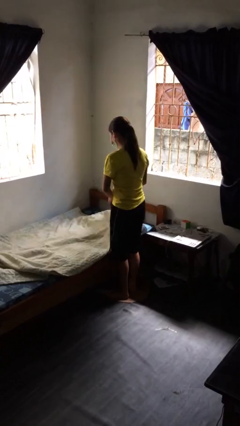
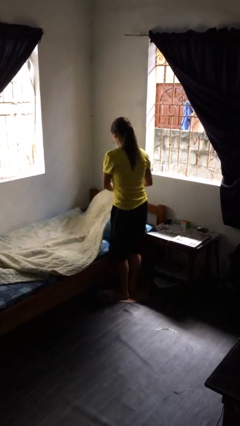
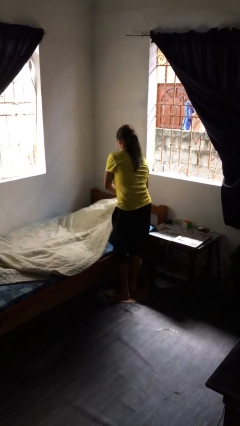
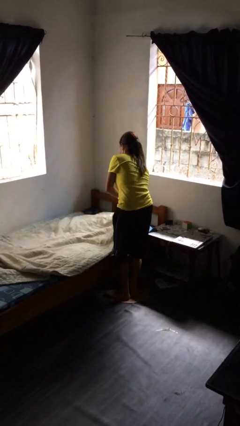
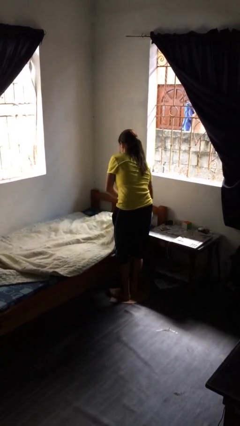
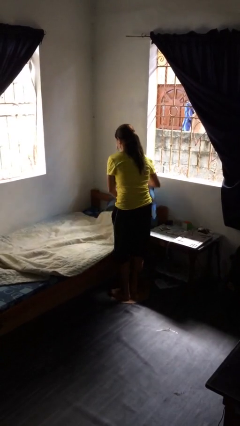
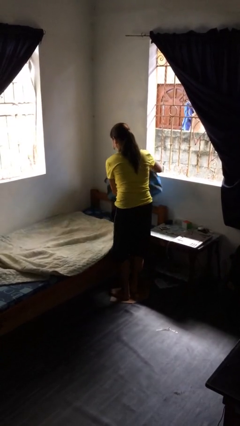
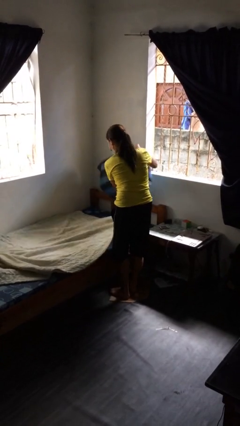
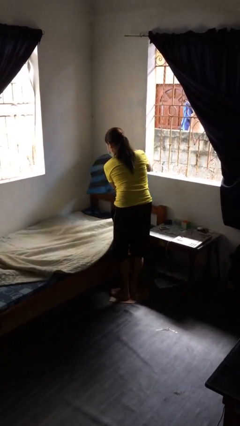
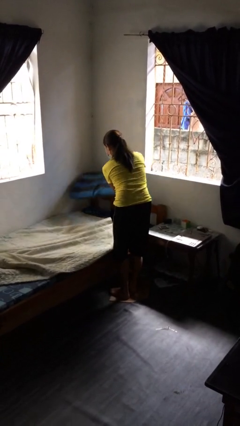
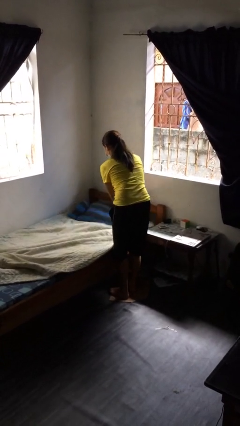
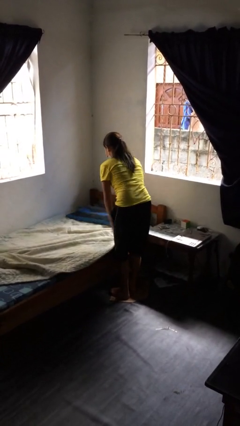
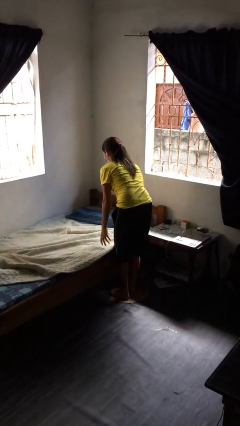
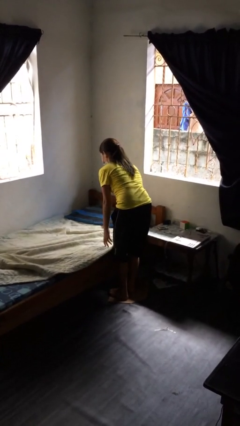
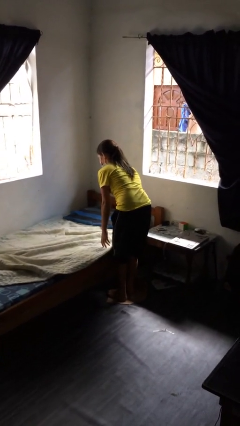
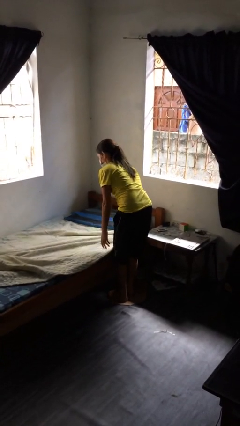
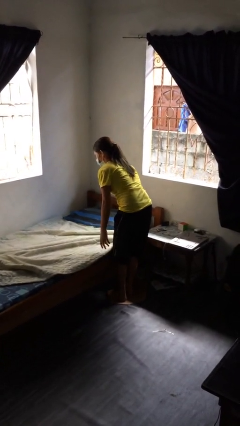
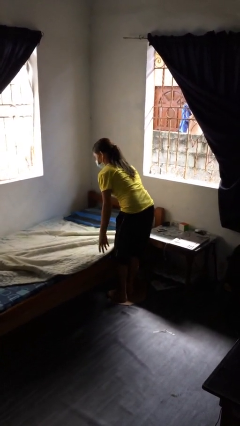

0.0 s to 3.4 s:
person makes bed

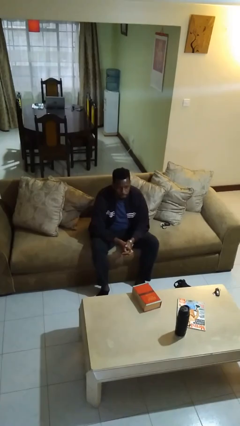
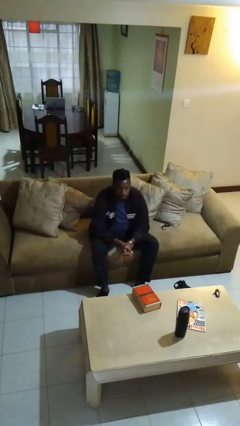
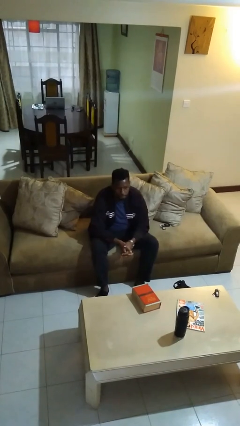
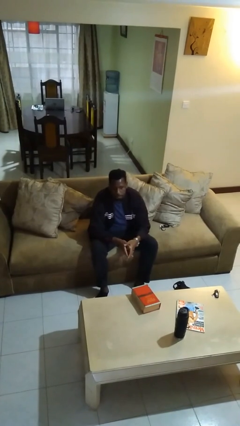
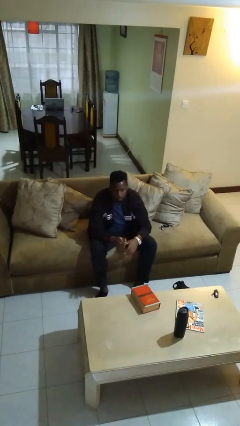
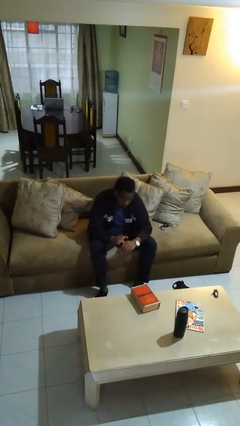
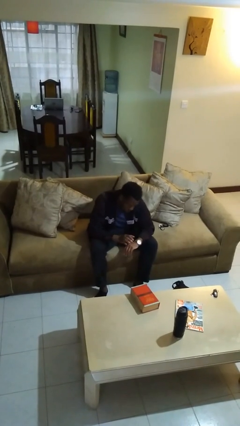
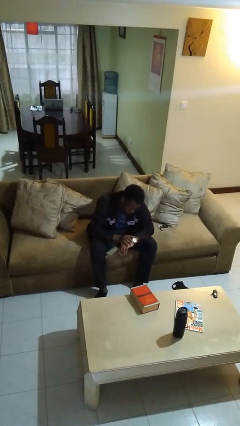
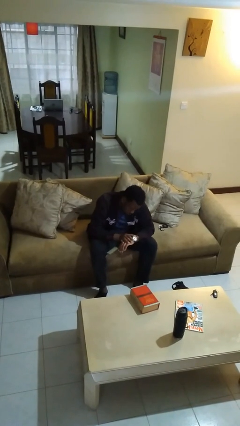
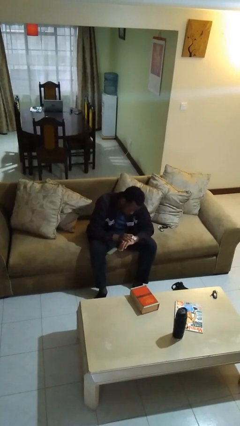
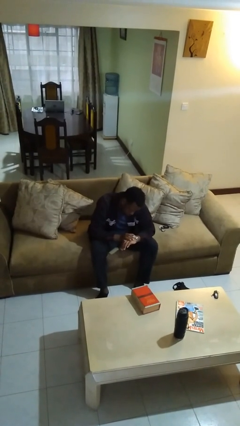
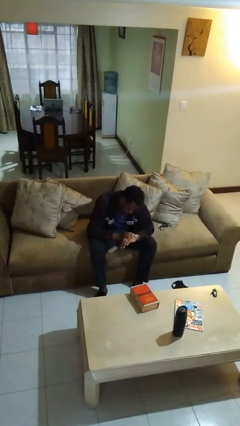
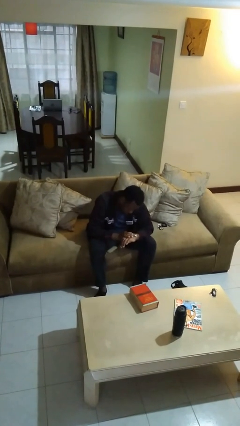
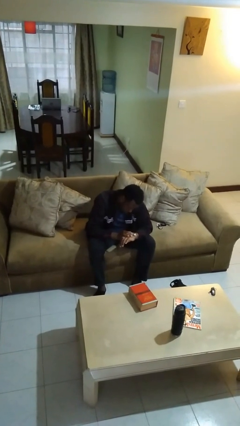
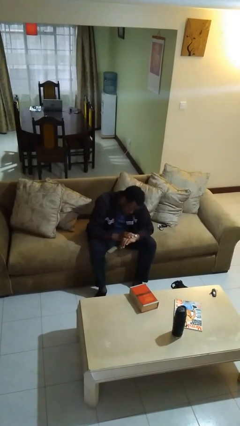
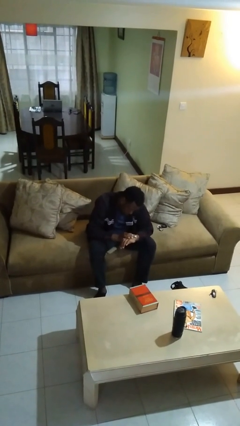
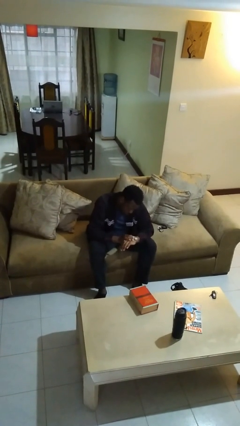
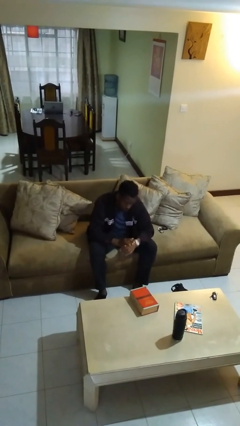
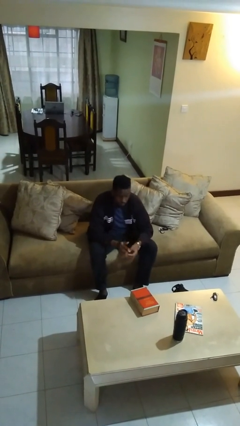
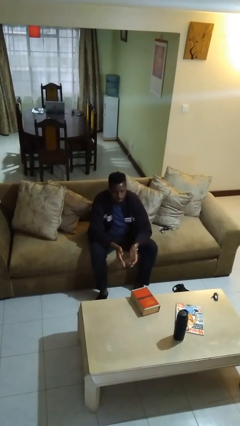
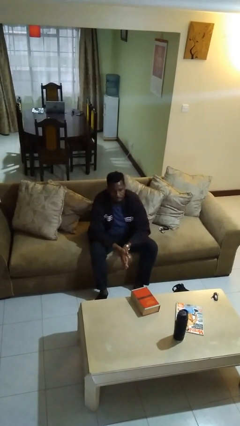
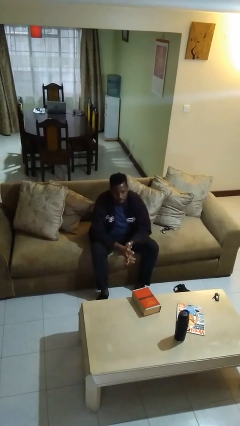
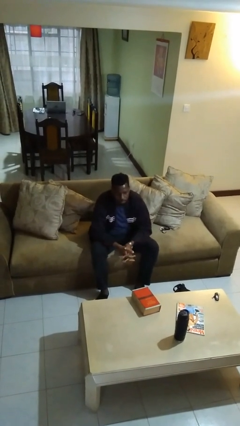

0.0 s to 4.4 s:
person looks at wristwatch

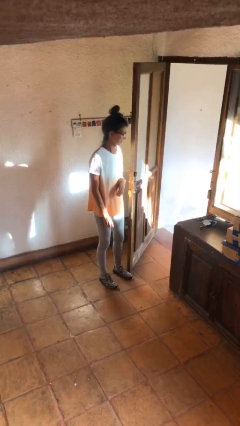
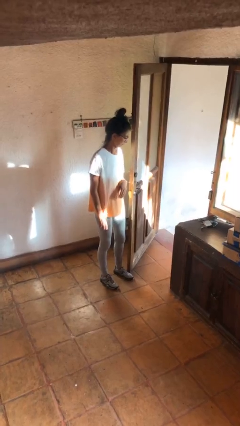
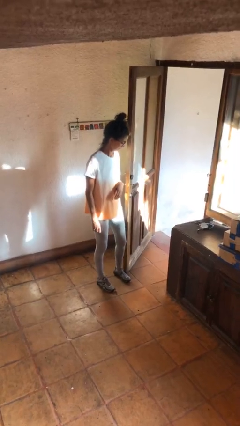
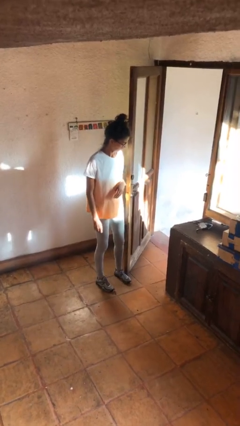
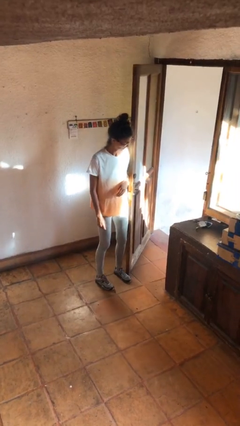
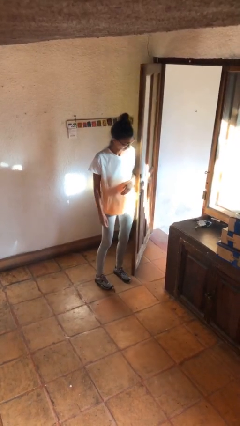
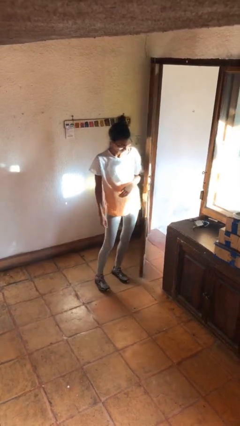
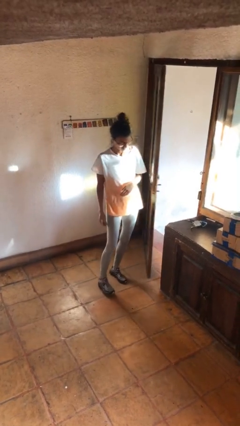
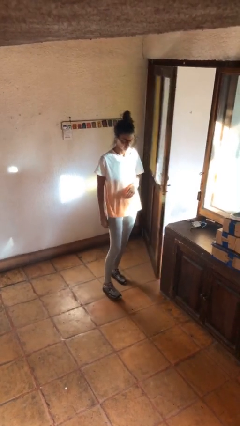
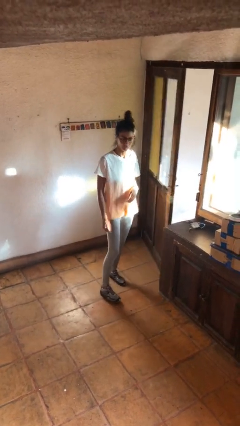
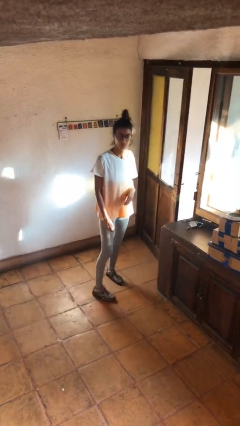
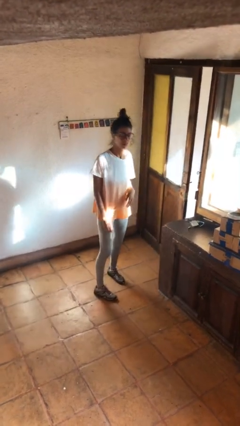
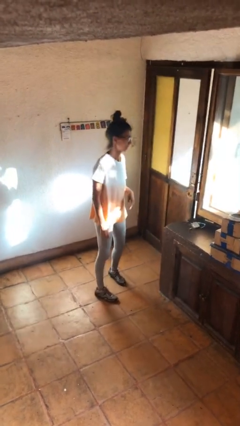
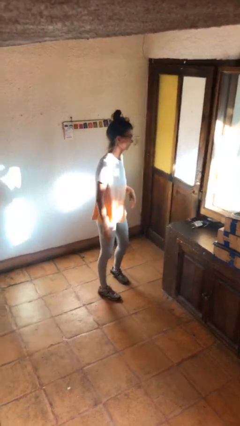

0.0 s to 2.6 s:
person closes door with hip

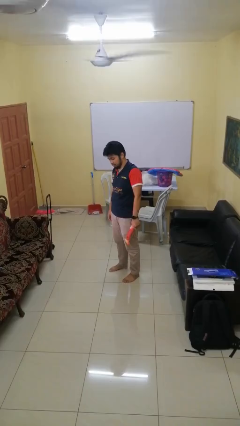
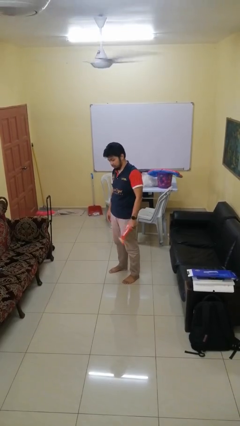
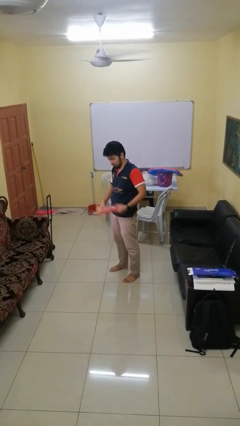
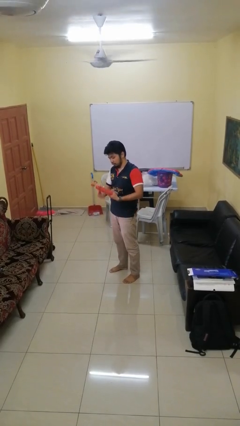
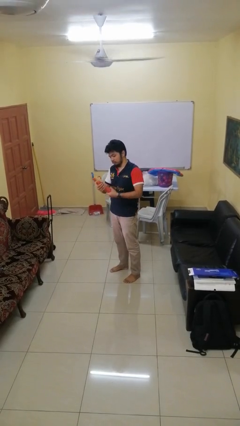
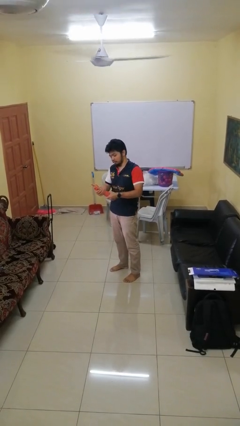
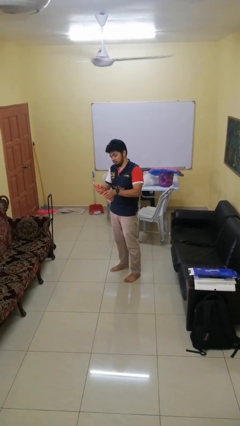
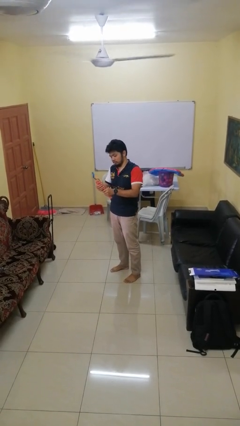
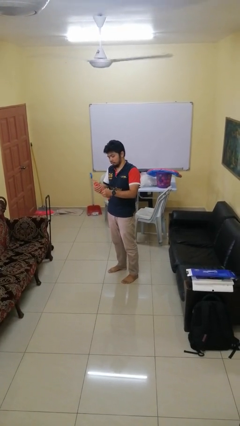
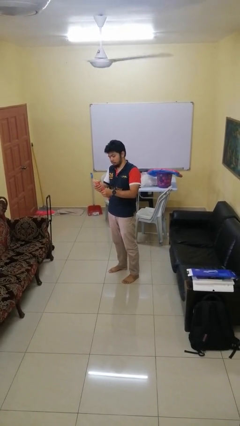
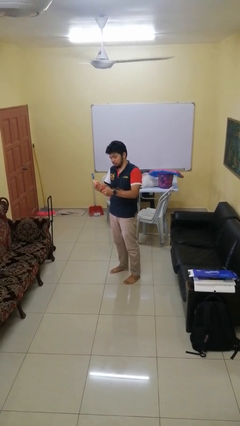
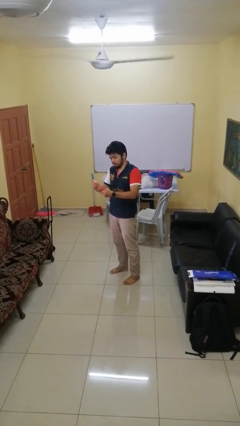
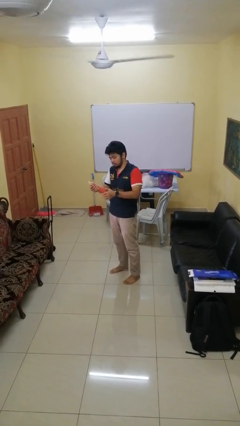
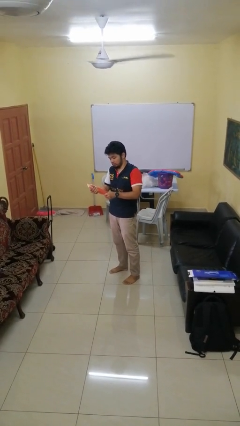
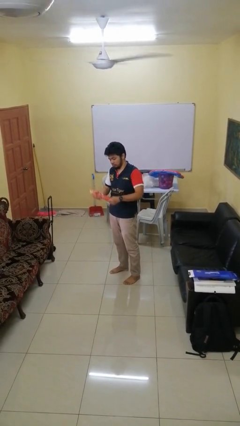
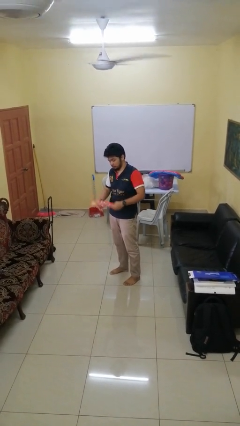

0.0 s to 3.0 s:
person squeezes object

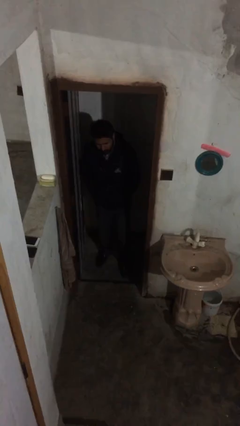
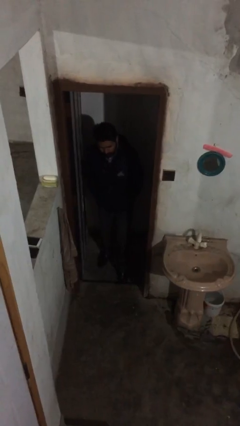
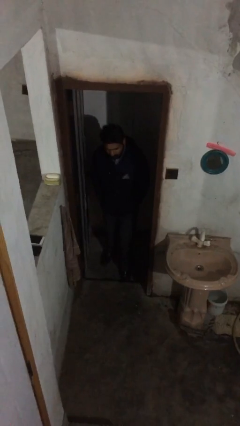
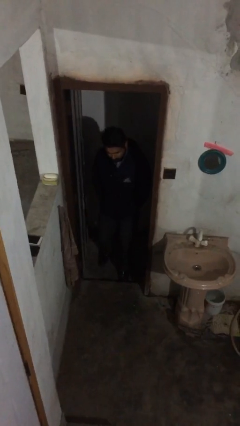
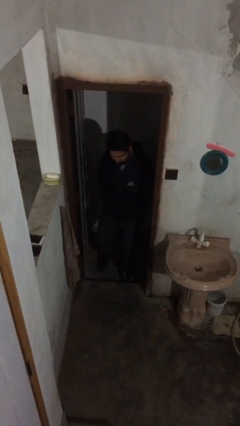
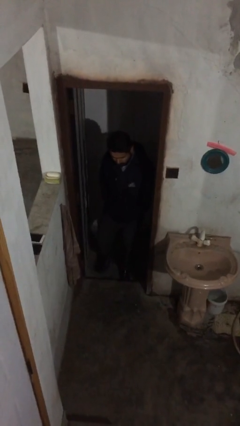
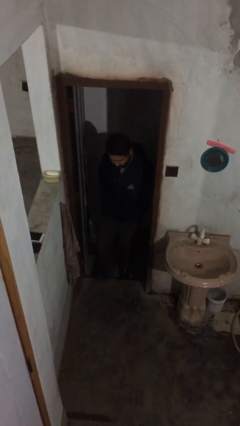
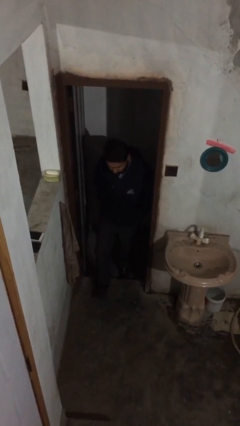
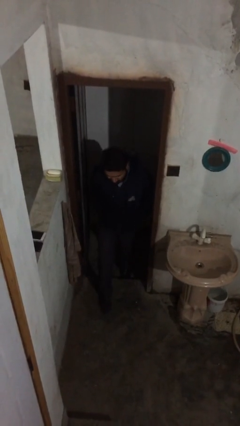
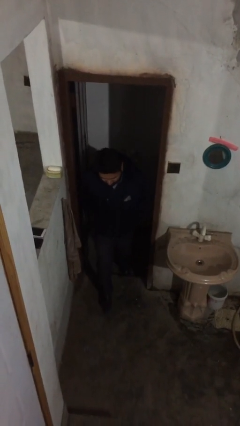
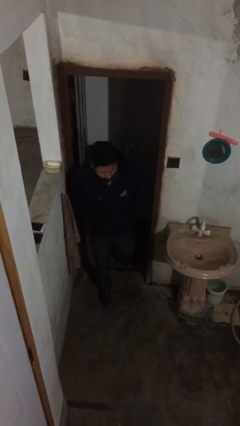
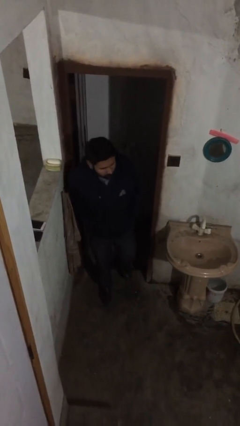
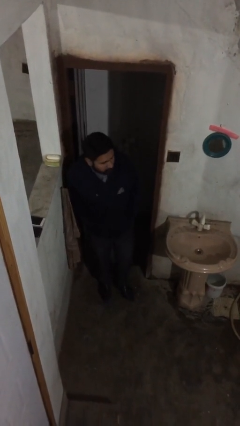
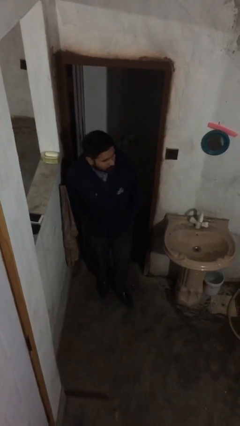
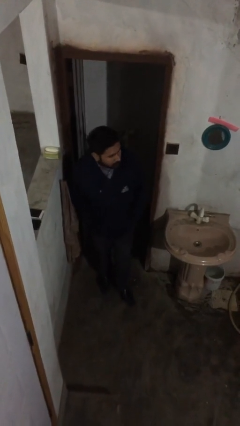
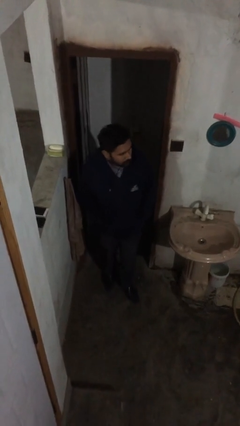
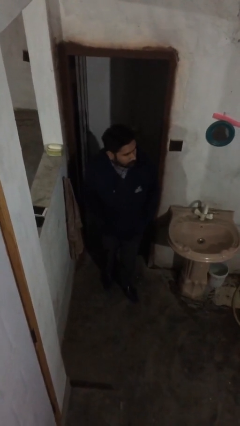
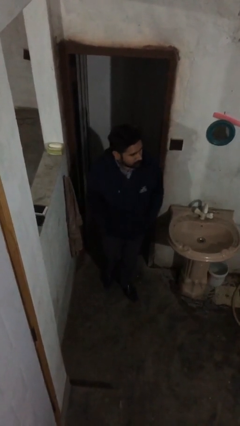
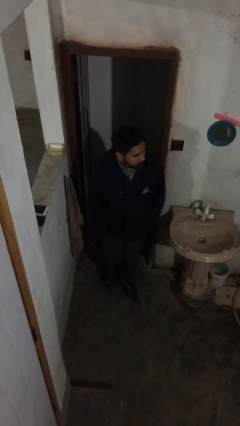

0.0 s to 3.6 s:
person enters scene through structure

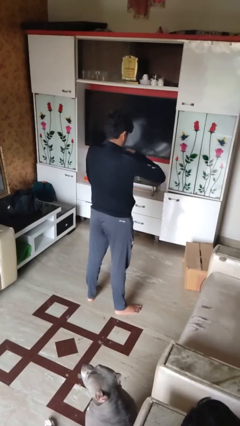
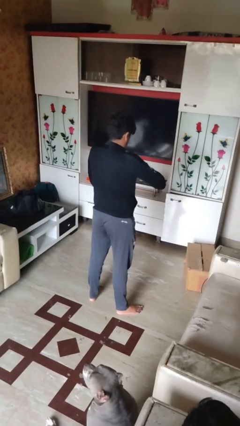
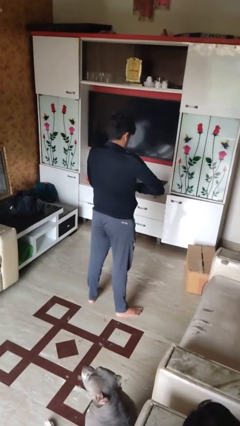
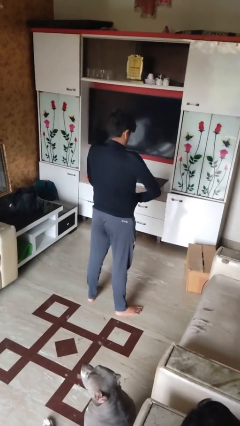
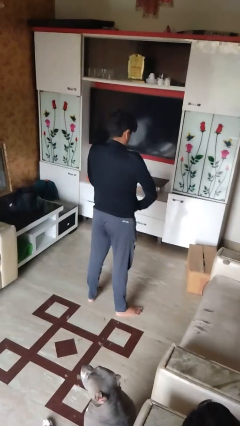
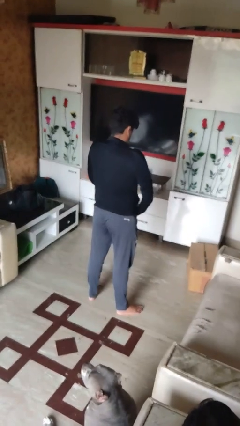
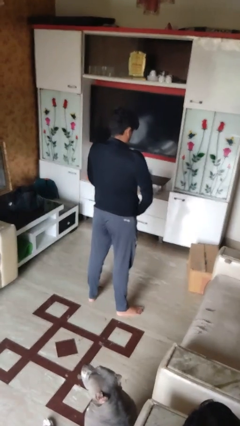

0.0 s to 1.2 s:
person unzips jacket
